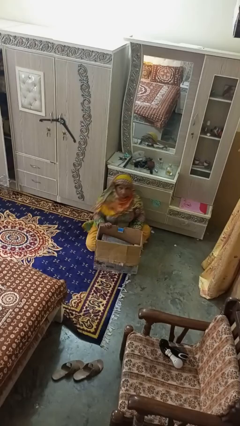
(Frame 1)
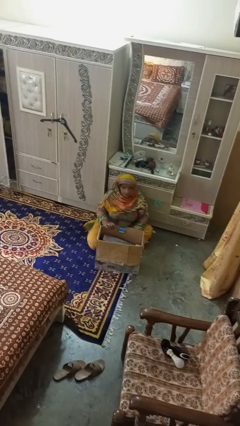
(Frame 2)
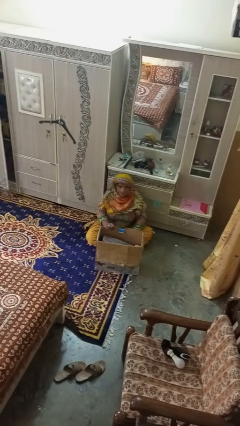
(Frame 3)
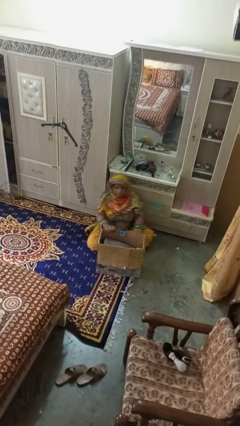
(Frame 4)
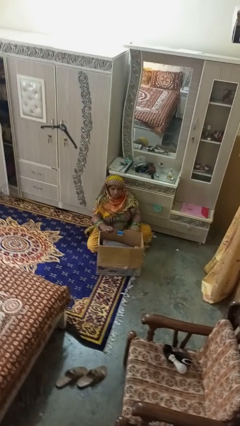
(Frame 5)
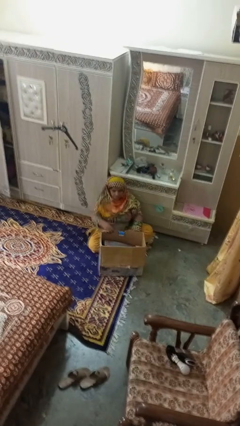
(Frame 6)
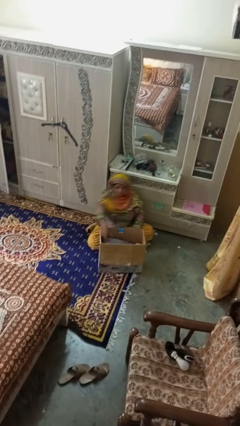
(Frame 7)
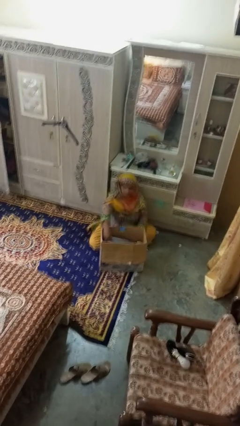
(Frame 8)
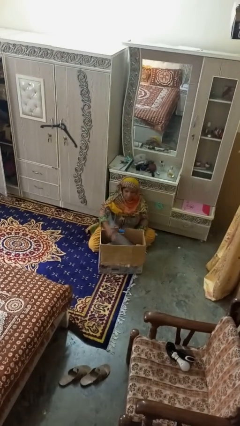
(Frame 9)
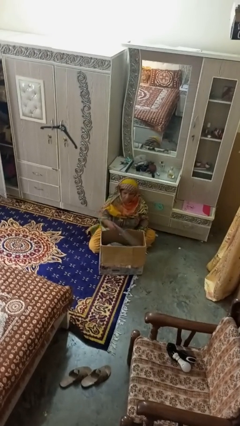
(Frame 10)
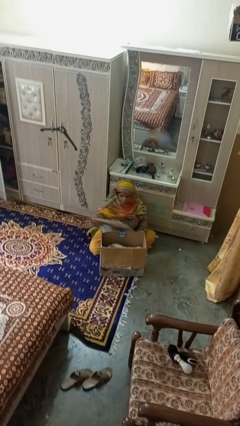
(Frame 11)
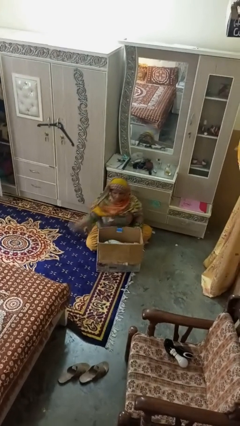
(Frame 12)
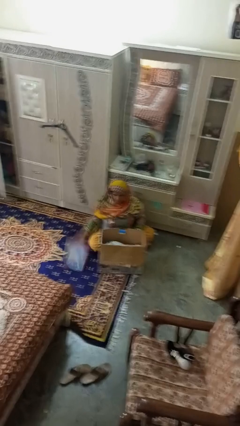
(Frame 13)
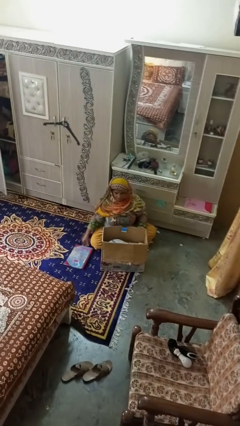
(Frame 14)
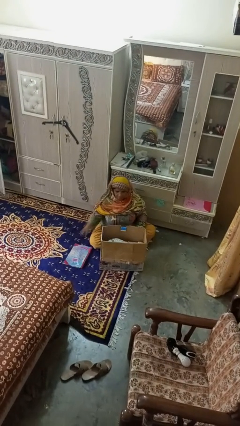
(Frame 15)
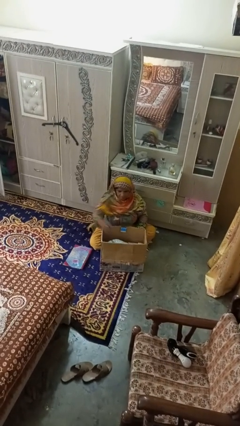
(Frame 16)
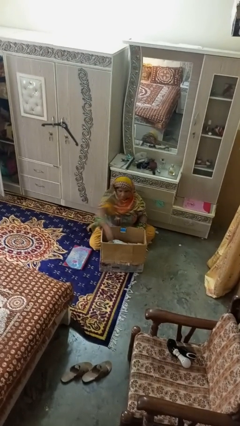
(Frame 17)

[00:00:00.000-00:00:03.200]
person takes object from box

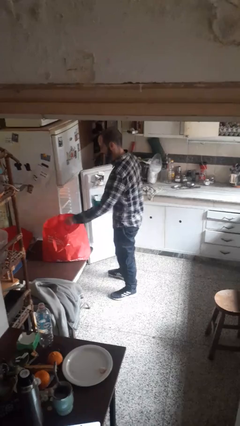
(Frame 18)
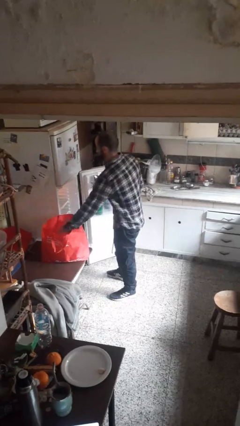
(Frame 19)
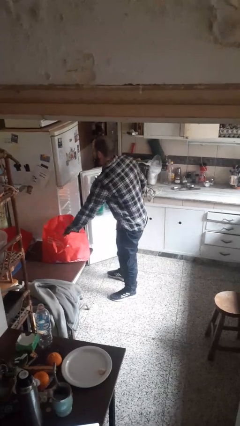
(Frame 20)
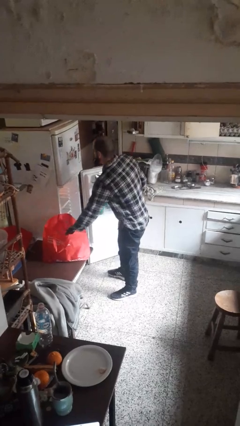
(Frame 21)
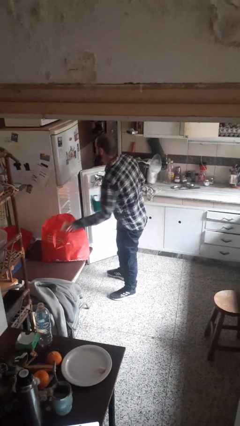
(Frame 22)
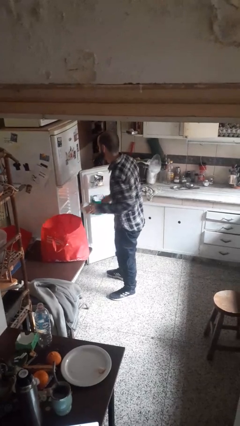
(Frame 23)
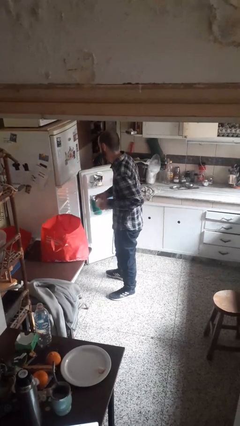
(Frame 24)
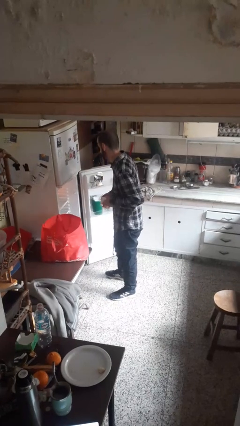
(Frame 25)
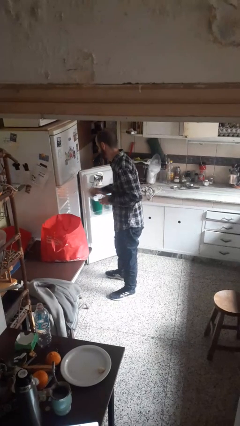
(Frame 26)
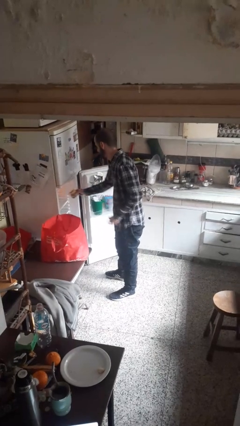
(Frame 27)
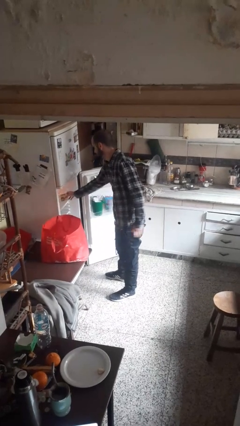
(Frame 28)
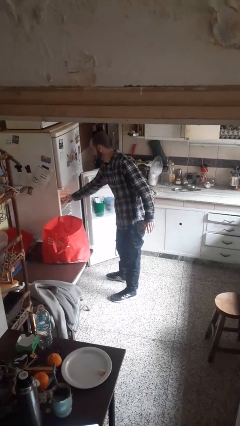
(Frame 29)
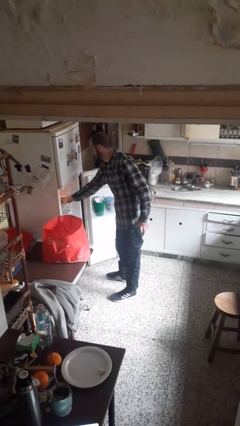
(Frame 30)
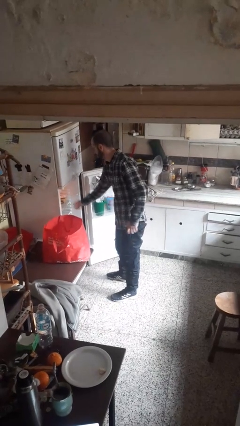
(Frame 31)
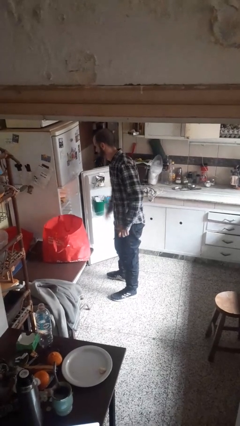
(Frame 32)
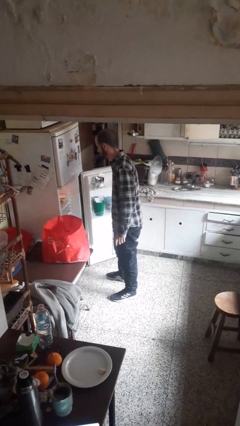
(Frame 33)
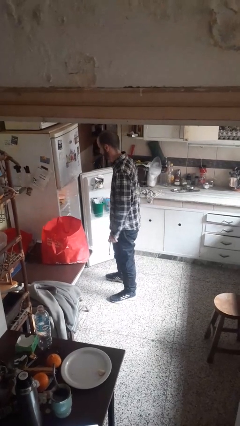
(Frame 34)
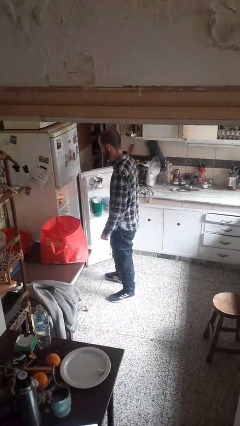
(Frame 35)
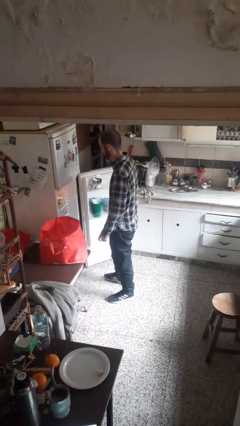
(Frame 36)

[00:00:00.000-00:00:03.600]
person loads groceries into refrigerator

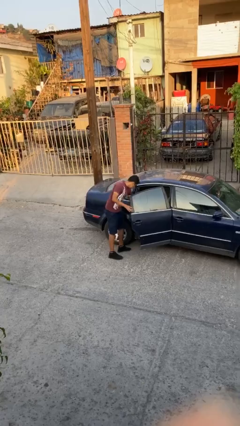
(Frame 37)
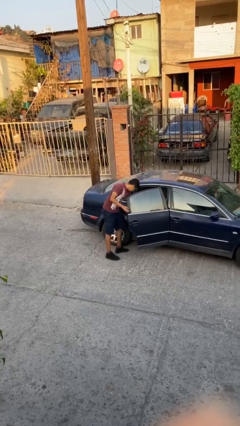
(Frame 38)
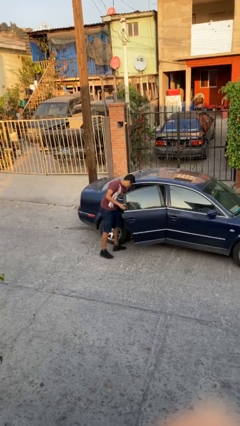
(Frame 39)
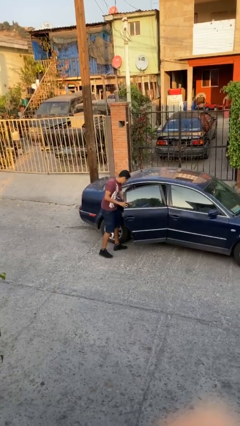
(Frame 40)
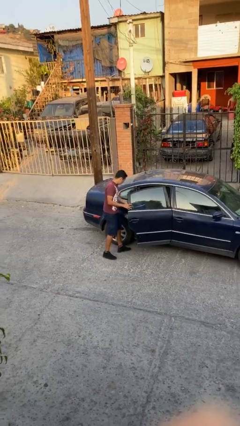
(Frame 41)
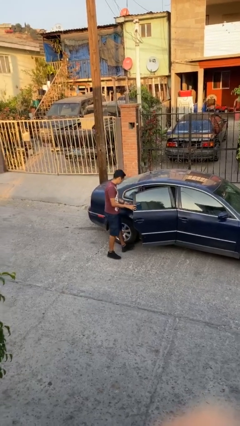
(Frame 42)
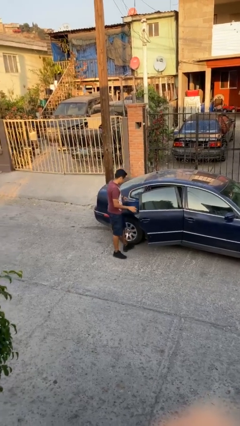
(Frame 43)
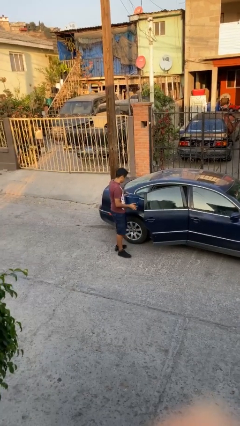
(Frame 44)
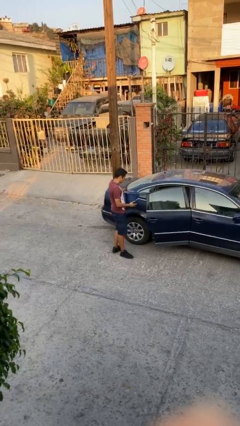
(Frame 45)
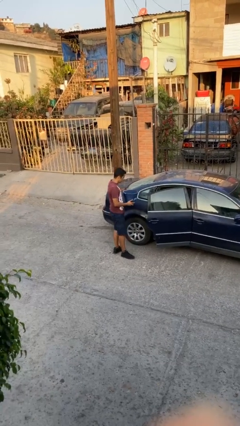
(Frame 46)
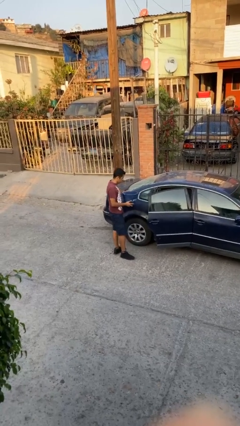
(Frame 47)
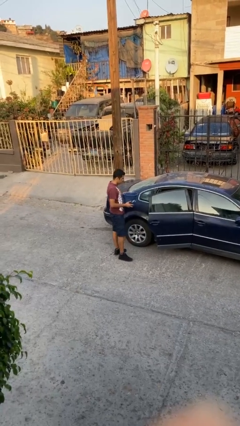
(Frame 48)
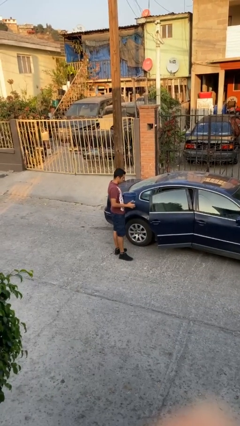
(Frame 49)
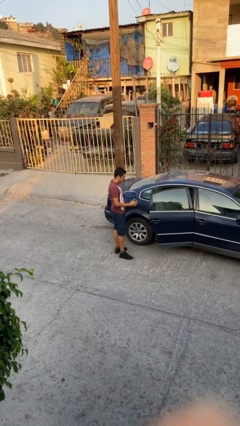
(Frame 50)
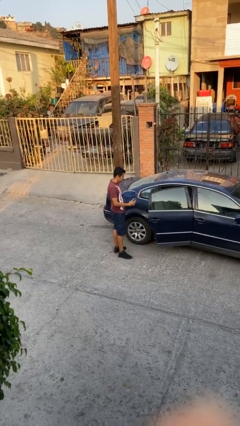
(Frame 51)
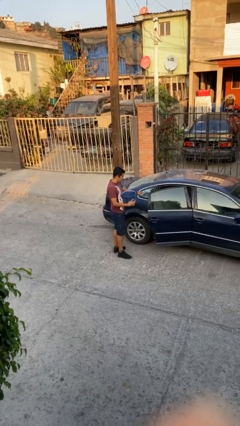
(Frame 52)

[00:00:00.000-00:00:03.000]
person unloads car

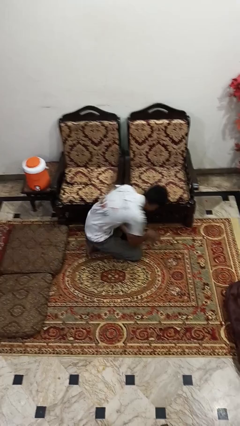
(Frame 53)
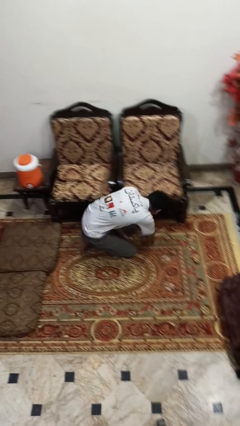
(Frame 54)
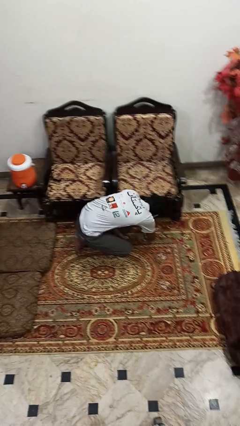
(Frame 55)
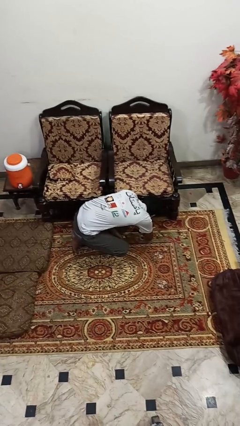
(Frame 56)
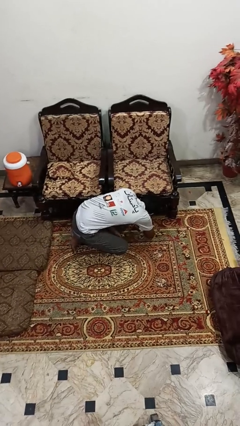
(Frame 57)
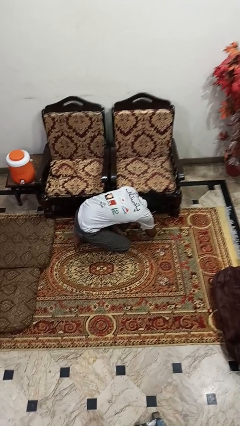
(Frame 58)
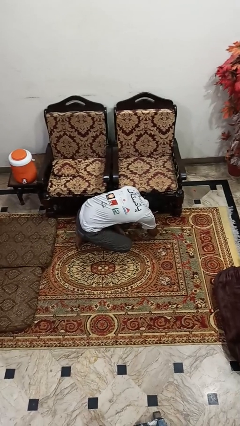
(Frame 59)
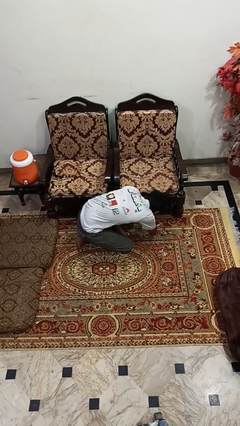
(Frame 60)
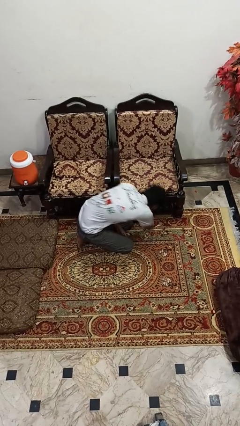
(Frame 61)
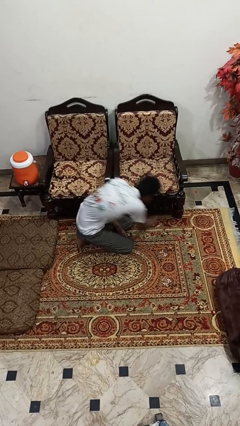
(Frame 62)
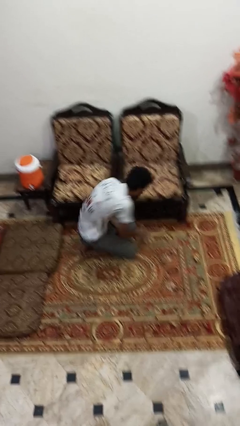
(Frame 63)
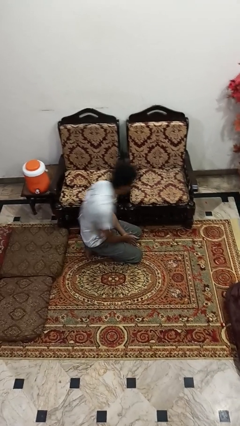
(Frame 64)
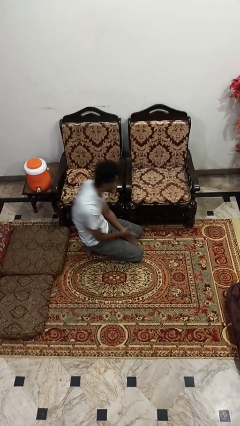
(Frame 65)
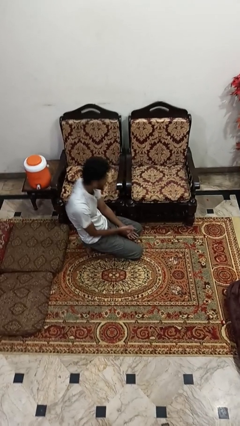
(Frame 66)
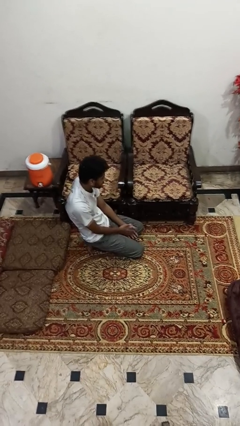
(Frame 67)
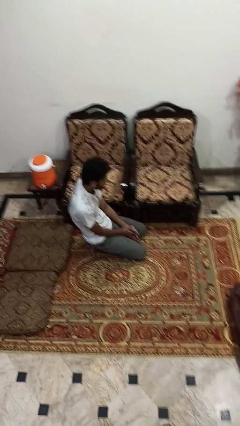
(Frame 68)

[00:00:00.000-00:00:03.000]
person searches under couch

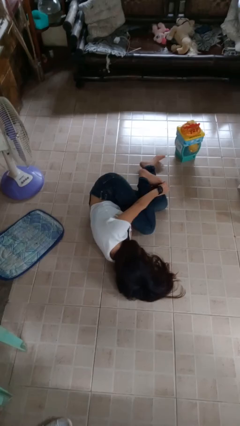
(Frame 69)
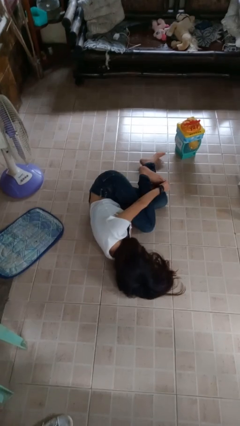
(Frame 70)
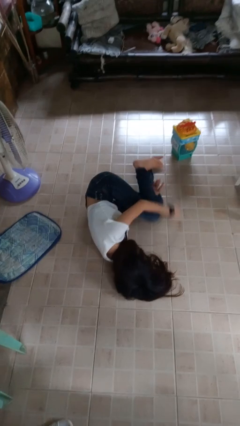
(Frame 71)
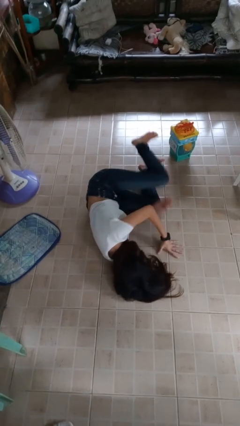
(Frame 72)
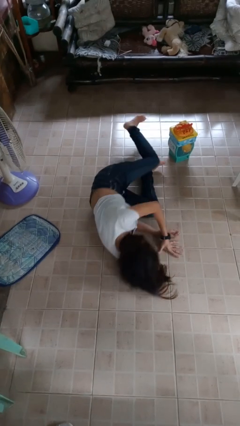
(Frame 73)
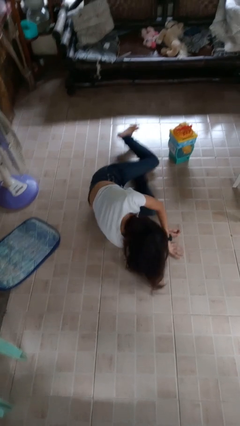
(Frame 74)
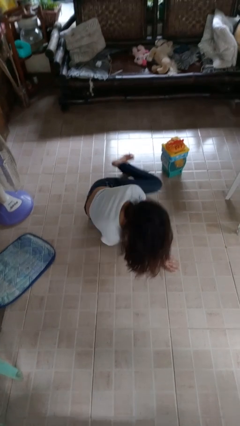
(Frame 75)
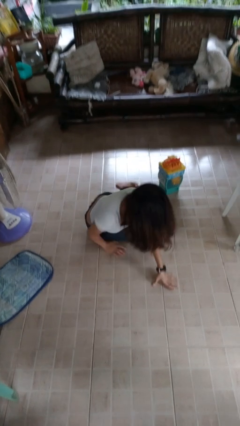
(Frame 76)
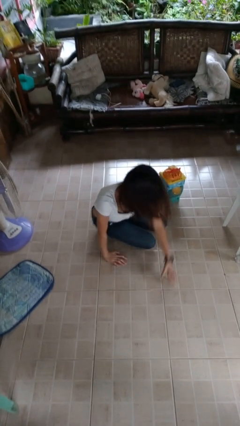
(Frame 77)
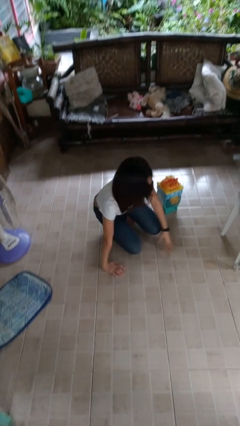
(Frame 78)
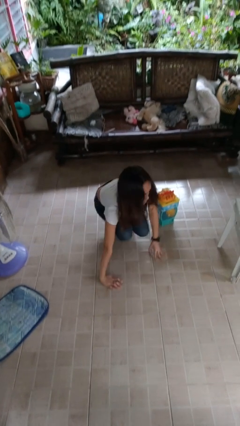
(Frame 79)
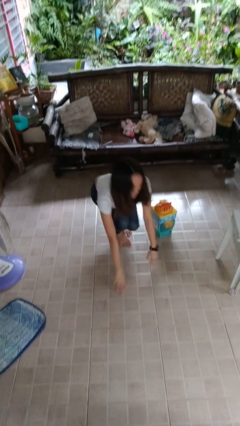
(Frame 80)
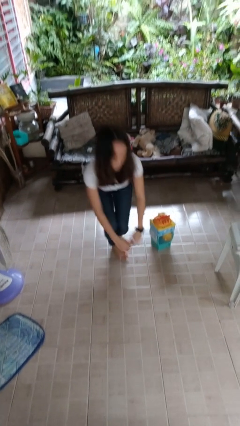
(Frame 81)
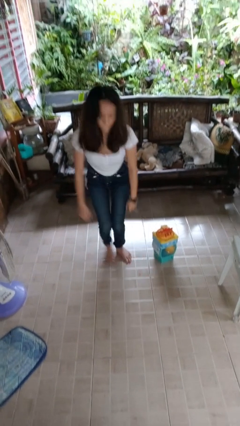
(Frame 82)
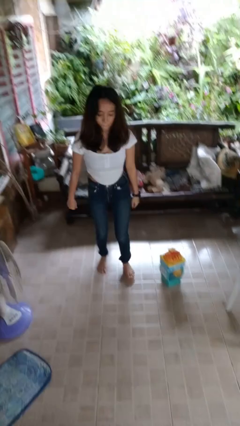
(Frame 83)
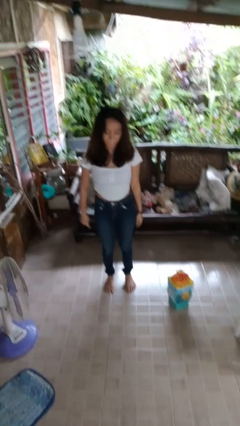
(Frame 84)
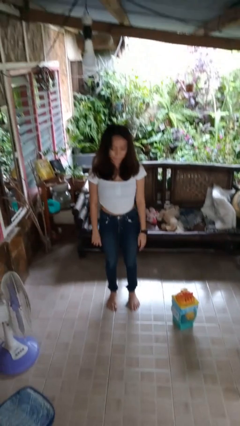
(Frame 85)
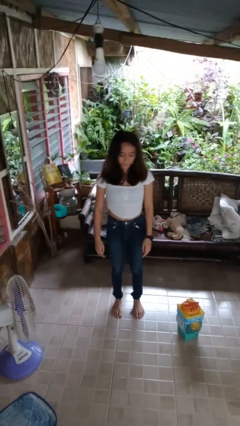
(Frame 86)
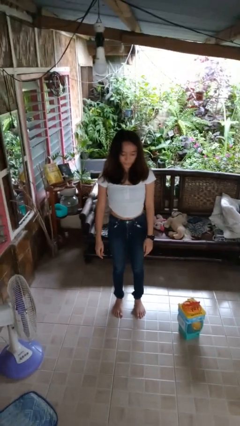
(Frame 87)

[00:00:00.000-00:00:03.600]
person stands up from floor

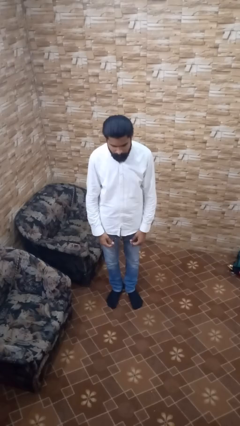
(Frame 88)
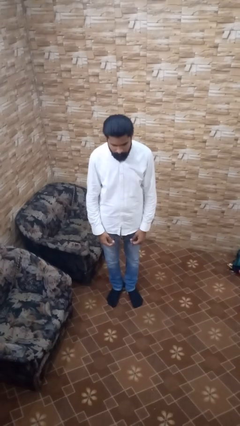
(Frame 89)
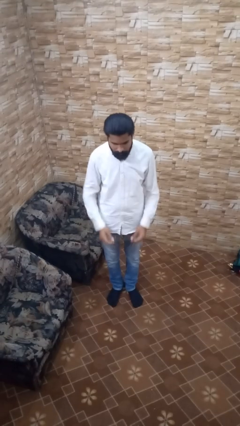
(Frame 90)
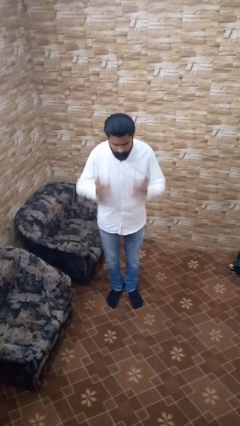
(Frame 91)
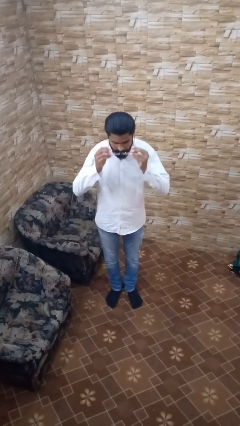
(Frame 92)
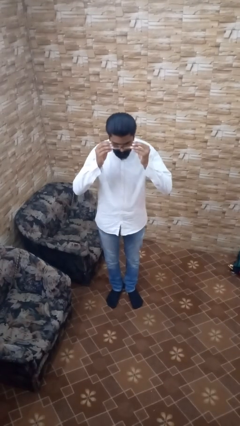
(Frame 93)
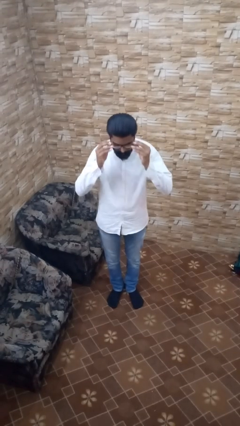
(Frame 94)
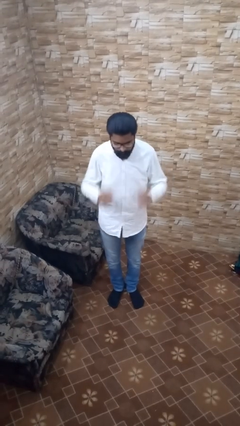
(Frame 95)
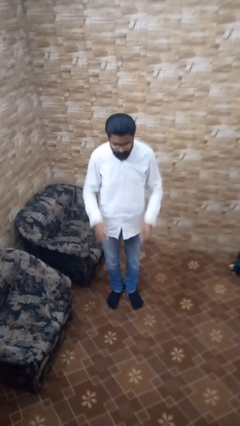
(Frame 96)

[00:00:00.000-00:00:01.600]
person puts on glasses
